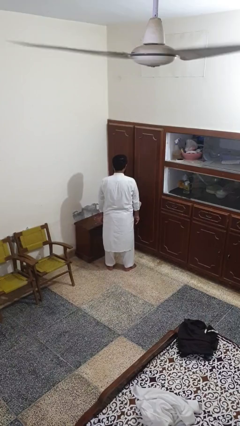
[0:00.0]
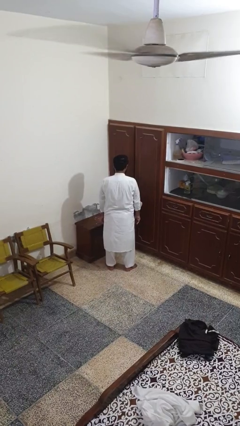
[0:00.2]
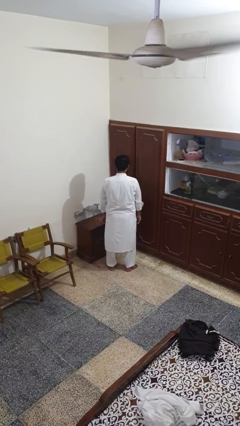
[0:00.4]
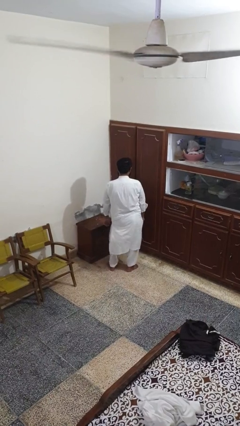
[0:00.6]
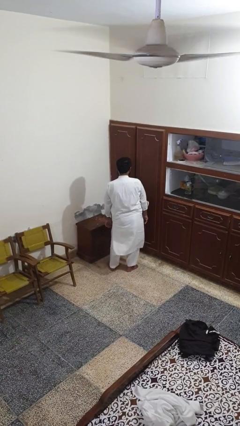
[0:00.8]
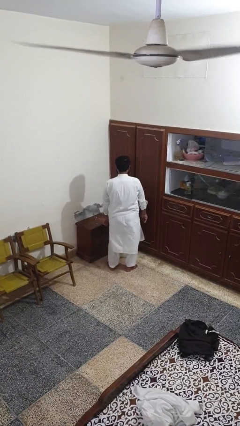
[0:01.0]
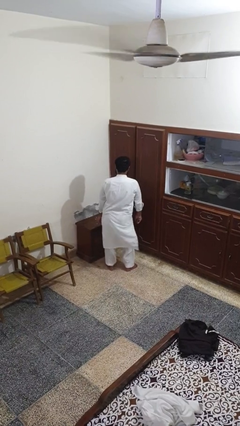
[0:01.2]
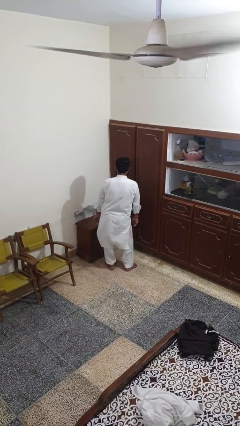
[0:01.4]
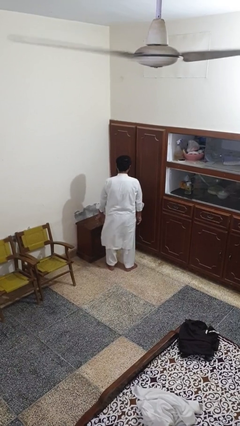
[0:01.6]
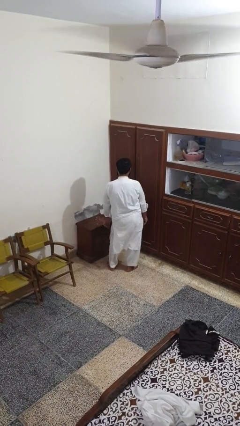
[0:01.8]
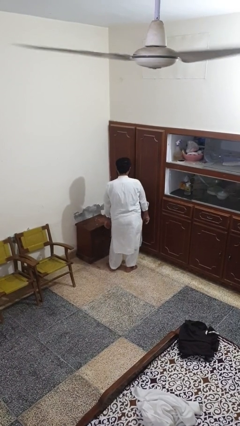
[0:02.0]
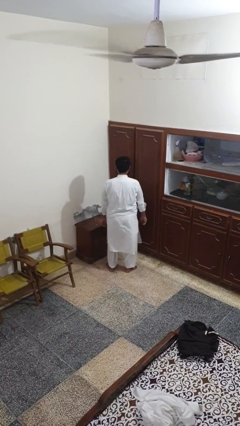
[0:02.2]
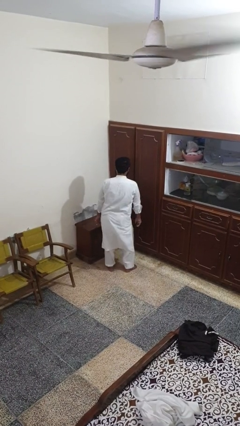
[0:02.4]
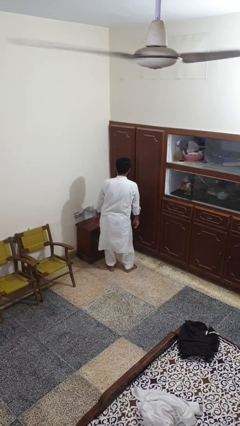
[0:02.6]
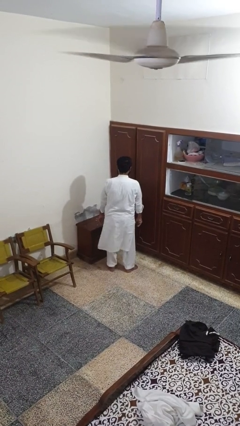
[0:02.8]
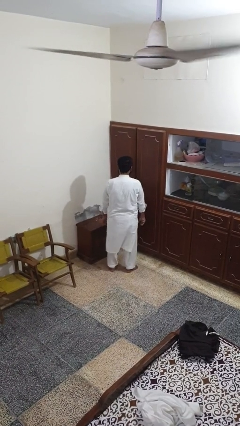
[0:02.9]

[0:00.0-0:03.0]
person wiggles hips

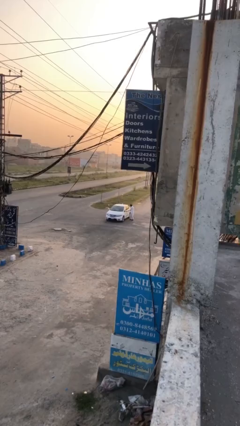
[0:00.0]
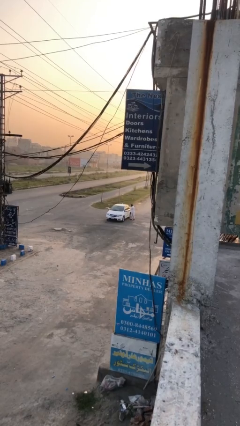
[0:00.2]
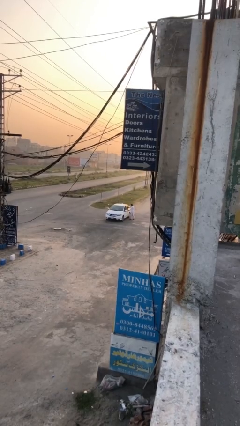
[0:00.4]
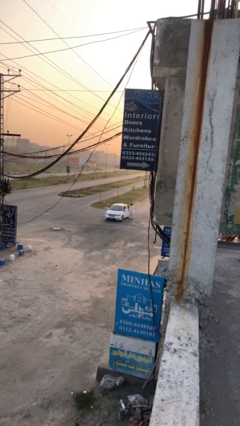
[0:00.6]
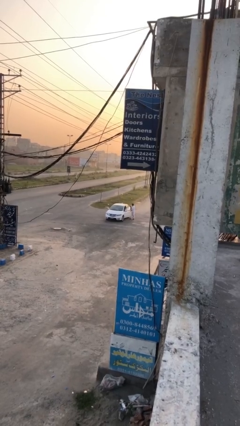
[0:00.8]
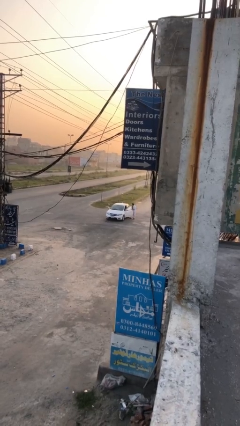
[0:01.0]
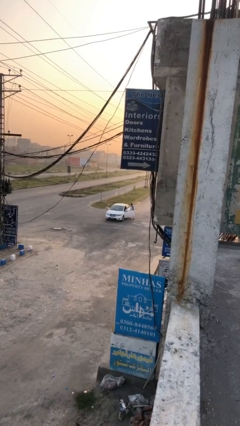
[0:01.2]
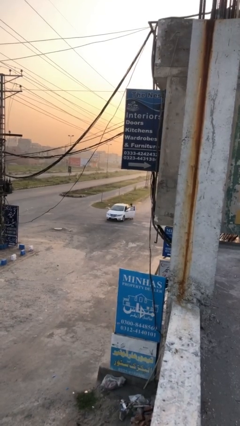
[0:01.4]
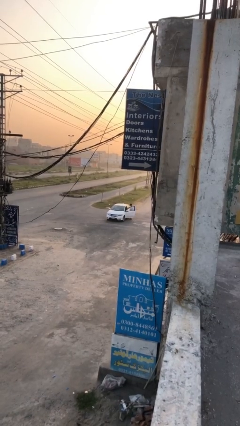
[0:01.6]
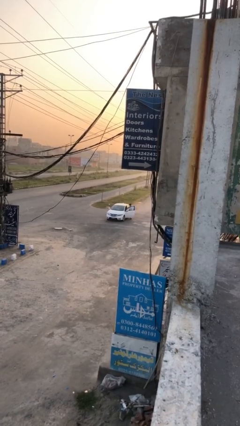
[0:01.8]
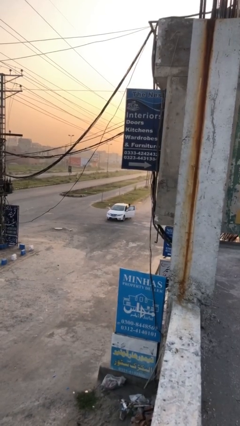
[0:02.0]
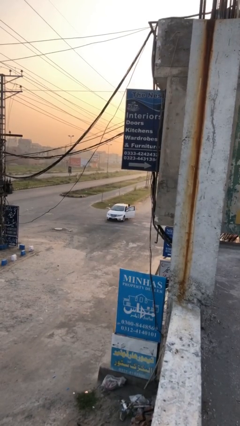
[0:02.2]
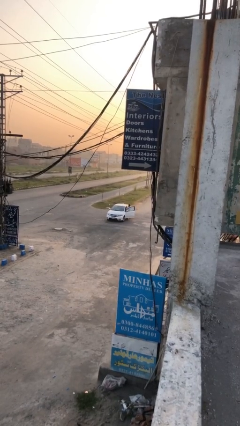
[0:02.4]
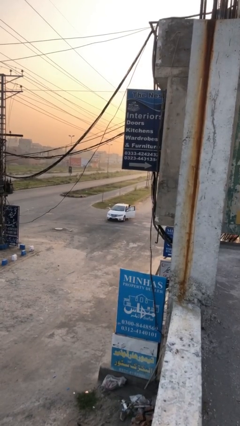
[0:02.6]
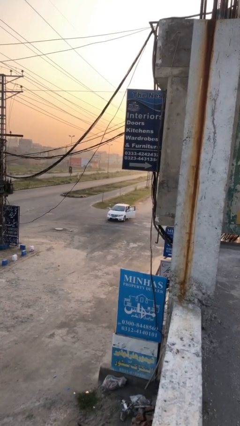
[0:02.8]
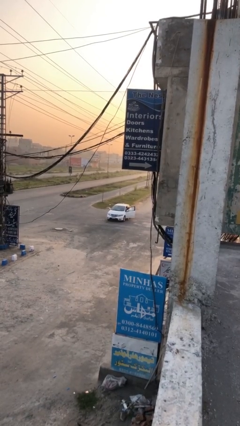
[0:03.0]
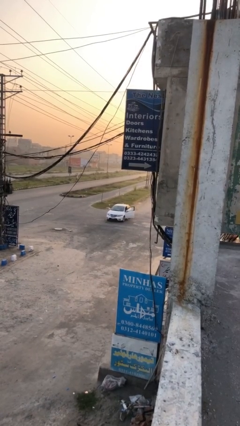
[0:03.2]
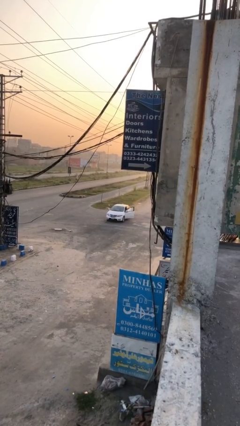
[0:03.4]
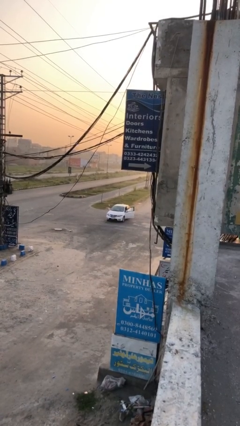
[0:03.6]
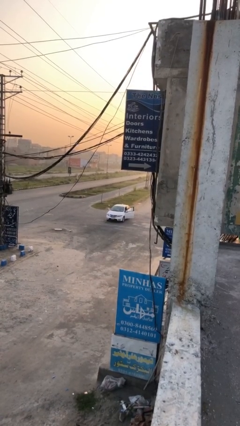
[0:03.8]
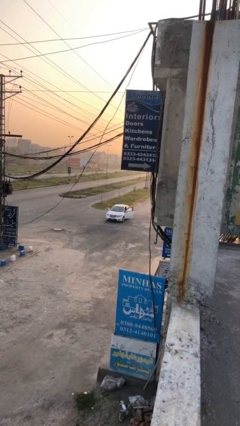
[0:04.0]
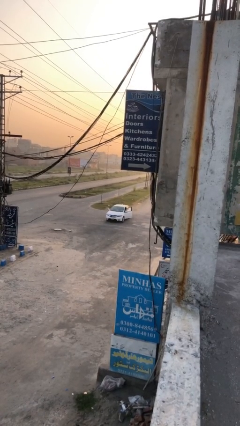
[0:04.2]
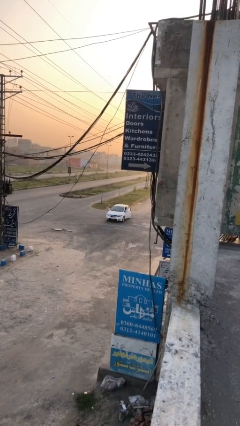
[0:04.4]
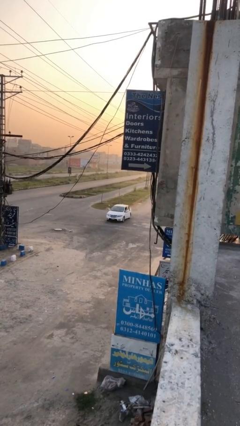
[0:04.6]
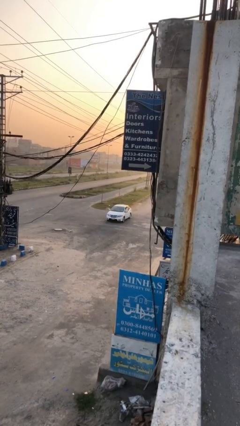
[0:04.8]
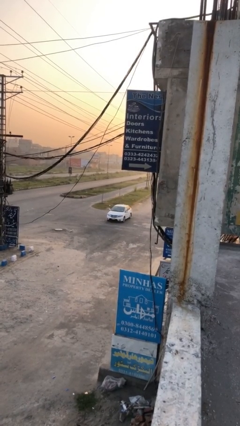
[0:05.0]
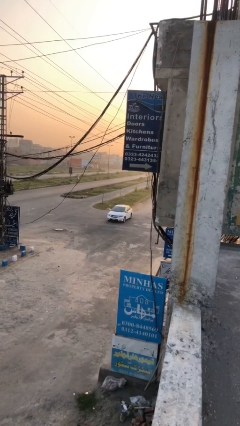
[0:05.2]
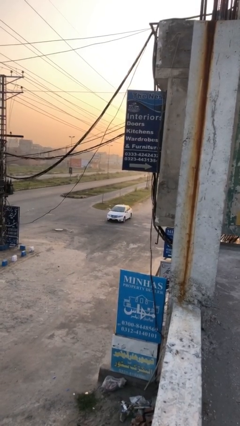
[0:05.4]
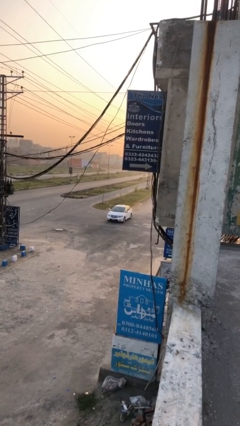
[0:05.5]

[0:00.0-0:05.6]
car picks up person

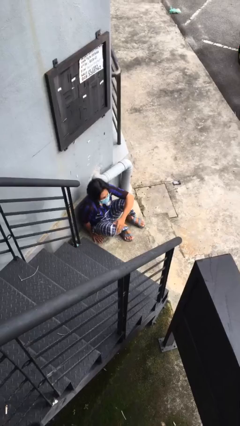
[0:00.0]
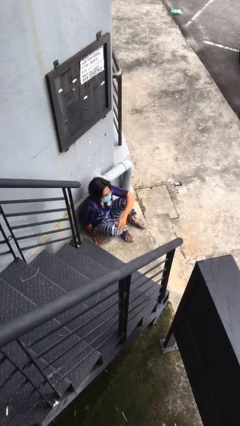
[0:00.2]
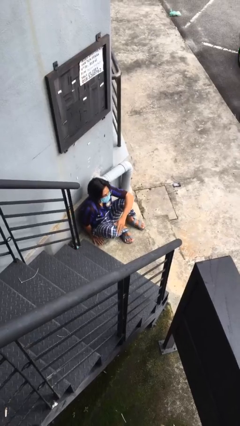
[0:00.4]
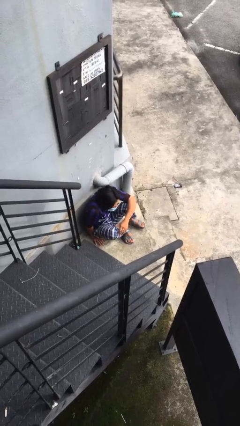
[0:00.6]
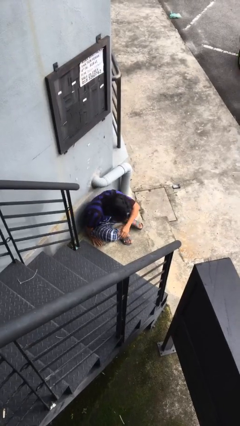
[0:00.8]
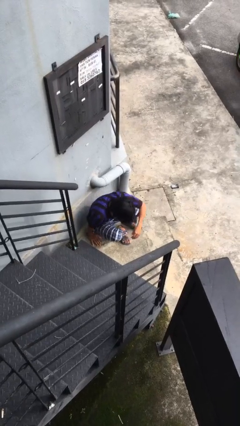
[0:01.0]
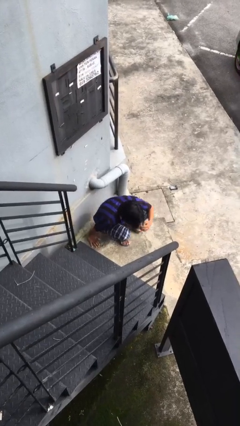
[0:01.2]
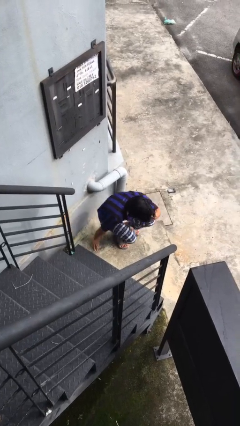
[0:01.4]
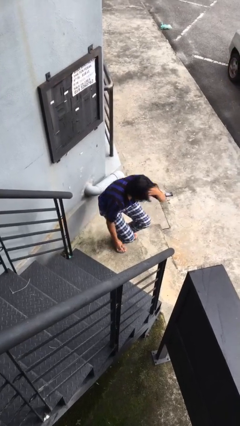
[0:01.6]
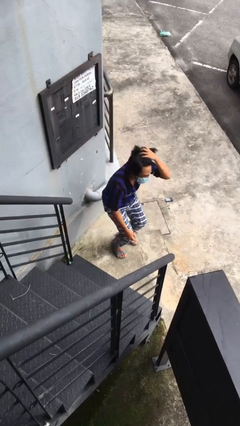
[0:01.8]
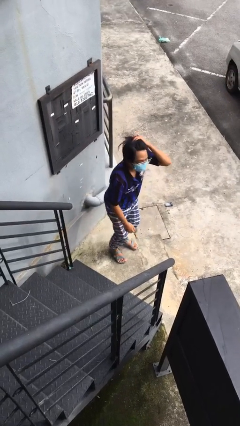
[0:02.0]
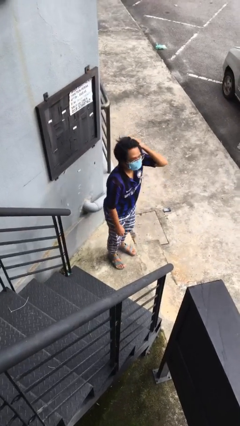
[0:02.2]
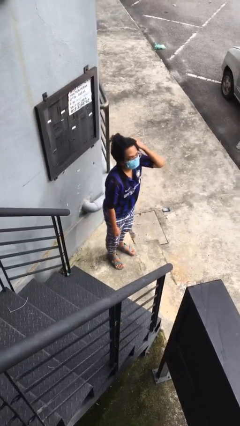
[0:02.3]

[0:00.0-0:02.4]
person stands up

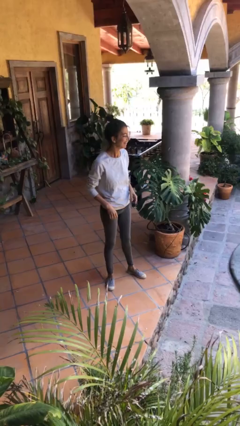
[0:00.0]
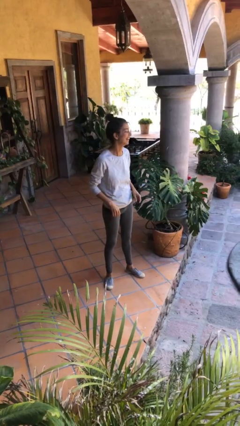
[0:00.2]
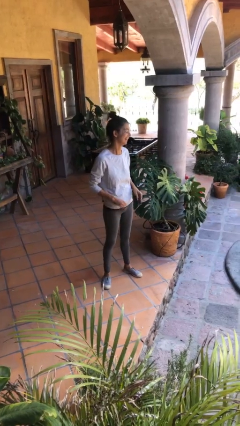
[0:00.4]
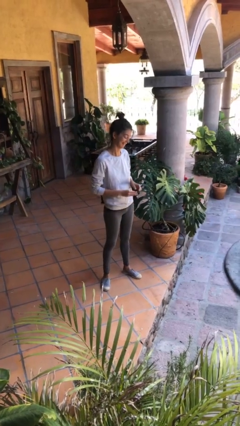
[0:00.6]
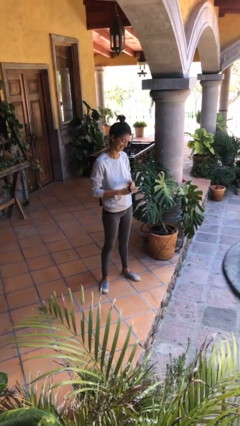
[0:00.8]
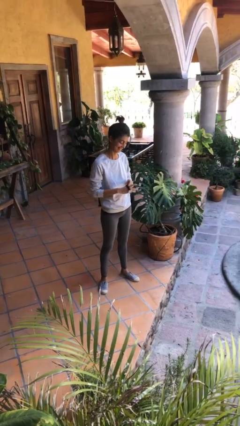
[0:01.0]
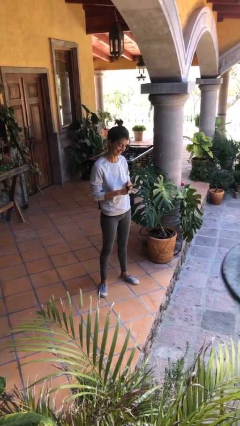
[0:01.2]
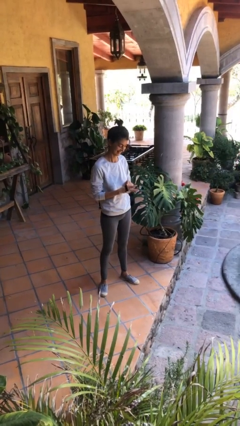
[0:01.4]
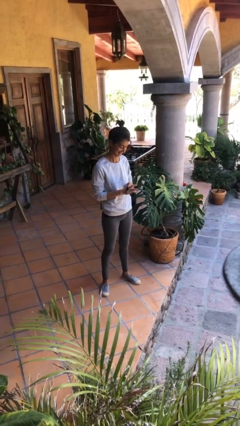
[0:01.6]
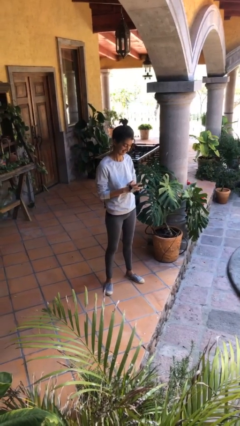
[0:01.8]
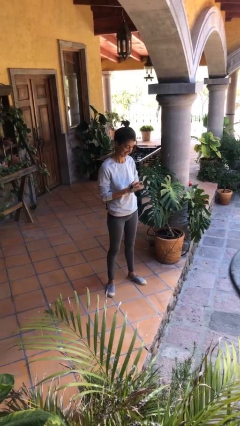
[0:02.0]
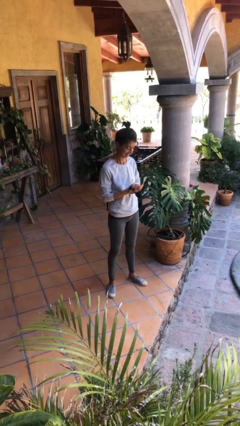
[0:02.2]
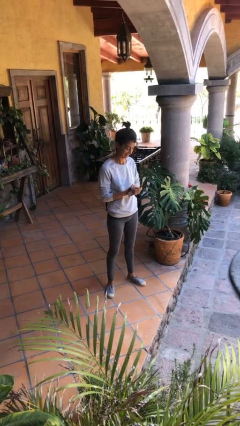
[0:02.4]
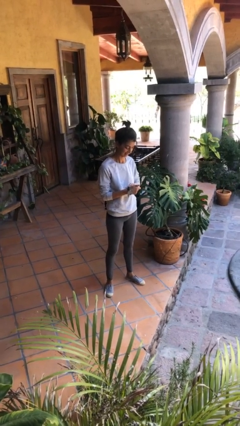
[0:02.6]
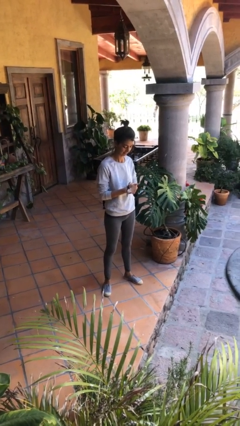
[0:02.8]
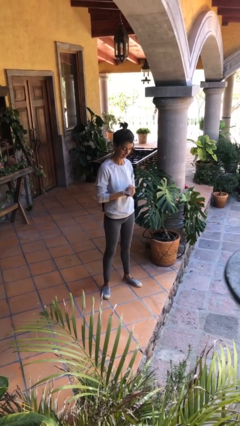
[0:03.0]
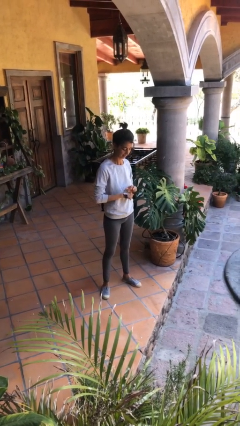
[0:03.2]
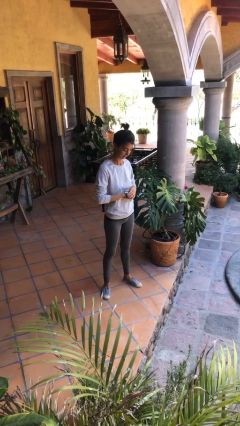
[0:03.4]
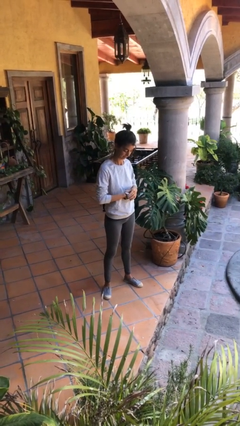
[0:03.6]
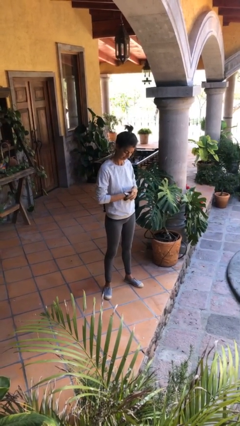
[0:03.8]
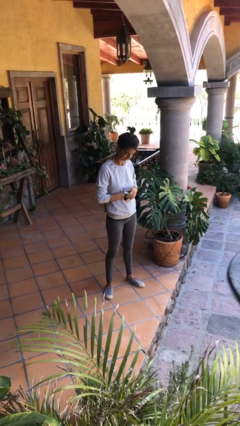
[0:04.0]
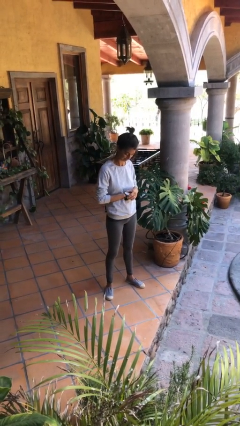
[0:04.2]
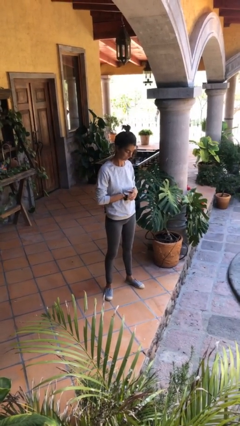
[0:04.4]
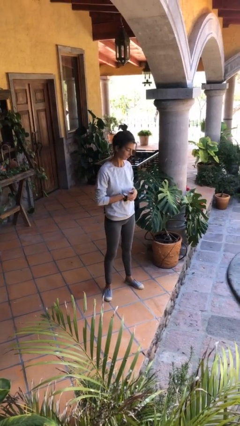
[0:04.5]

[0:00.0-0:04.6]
person puts on wristwatch

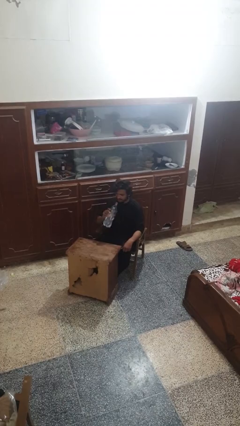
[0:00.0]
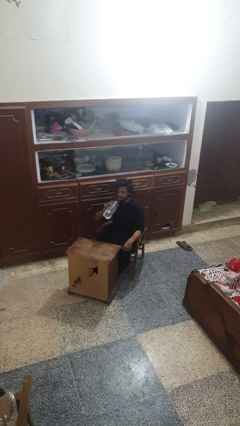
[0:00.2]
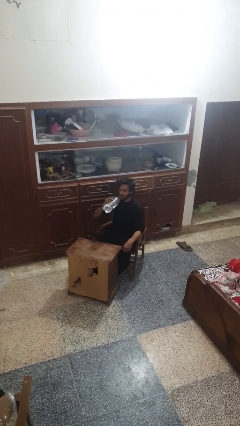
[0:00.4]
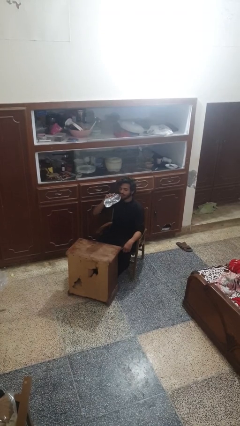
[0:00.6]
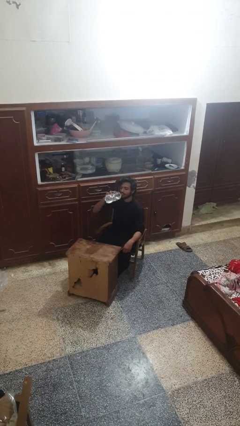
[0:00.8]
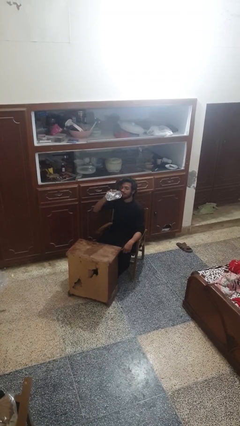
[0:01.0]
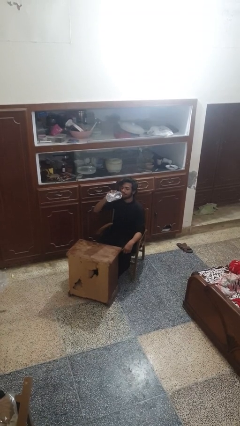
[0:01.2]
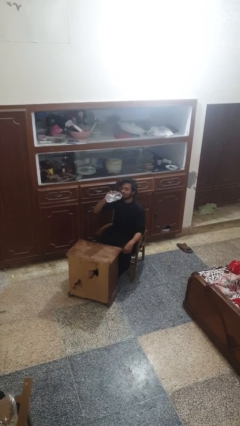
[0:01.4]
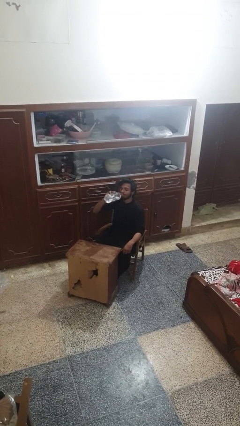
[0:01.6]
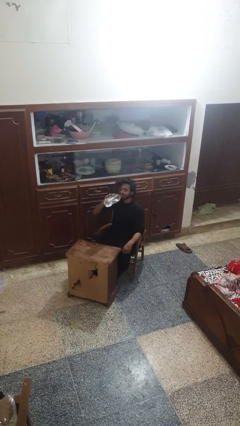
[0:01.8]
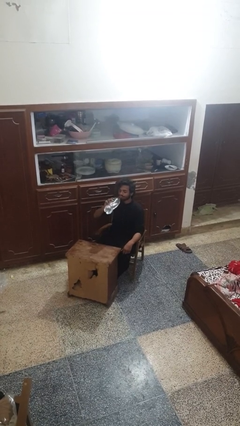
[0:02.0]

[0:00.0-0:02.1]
person drinks from bottle
